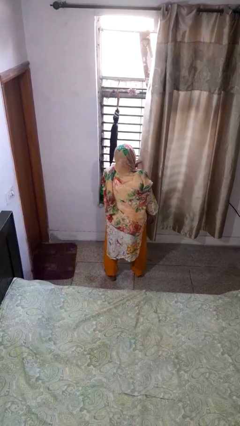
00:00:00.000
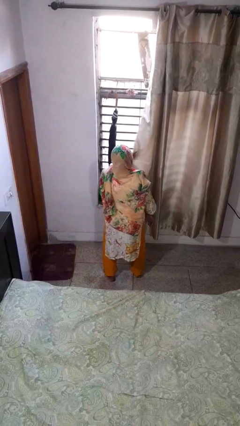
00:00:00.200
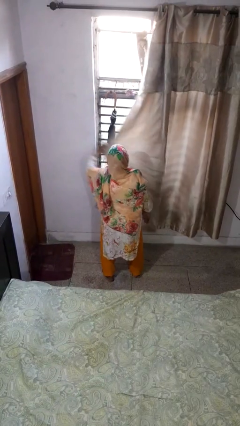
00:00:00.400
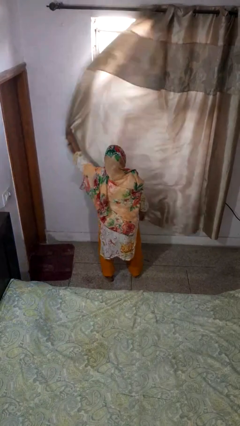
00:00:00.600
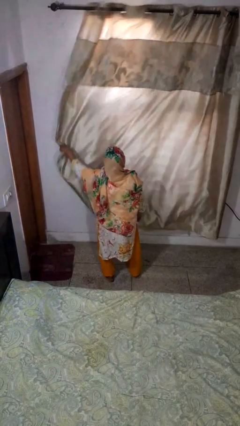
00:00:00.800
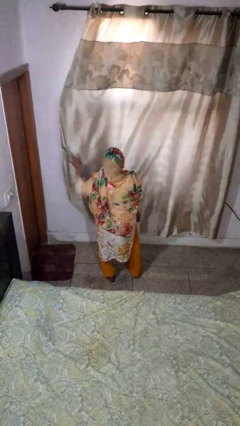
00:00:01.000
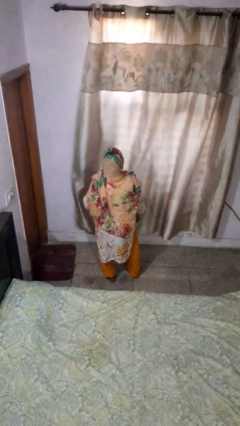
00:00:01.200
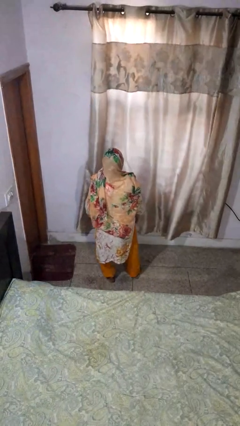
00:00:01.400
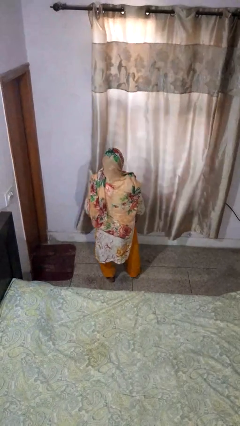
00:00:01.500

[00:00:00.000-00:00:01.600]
person closes curtains

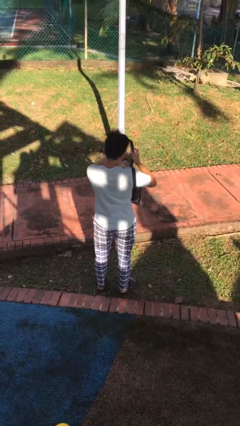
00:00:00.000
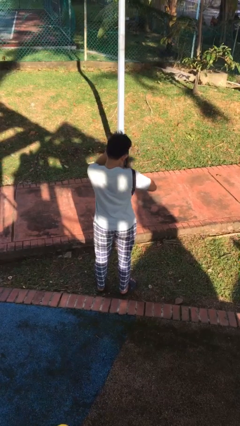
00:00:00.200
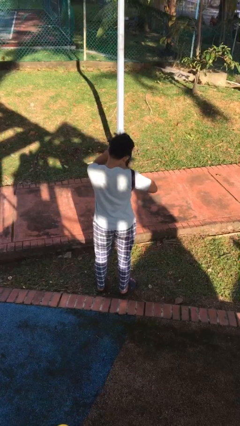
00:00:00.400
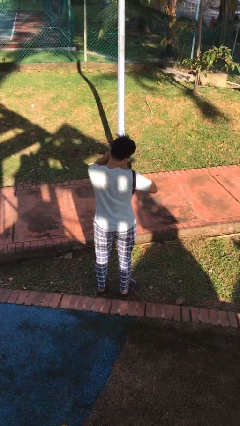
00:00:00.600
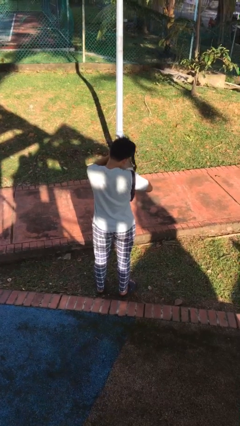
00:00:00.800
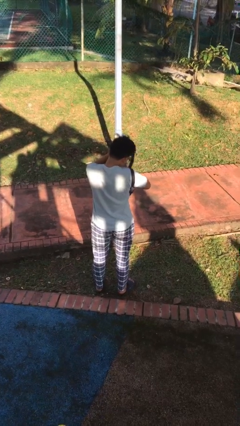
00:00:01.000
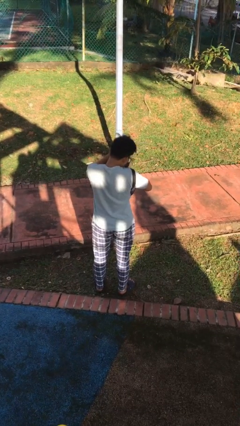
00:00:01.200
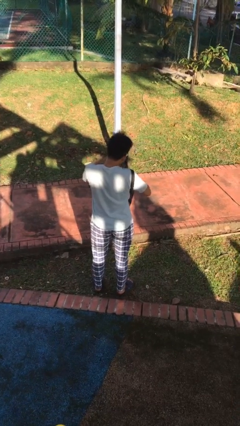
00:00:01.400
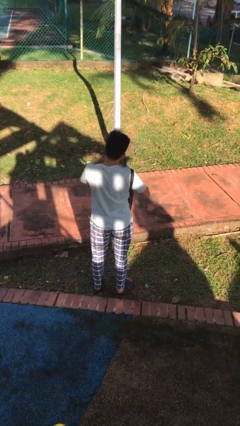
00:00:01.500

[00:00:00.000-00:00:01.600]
person searches in bag

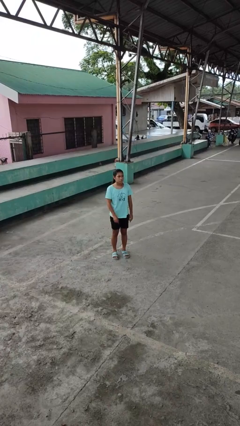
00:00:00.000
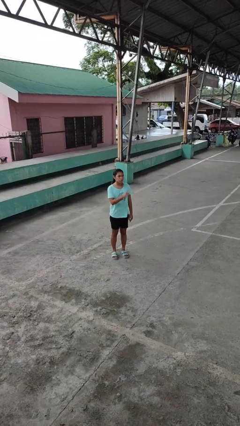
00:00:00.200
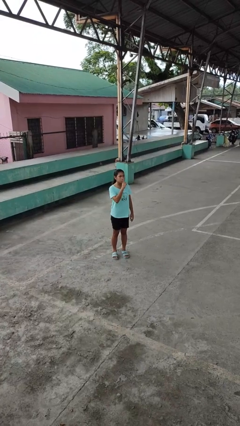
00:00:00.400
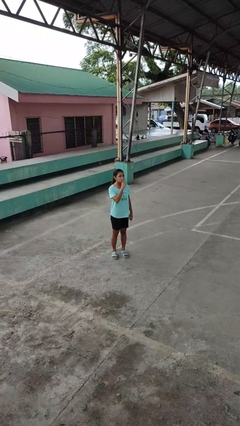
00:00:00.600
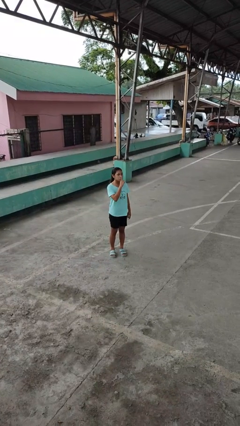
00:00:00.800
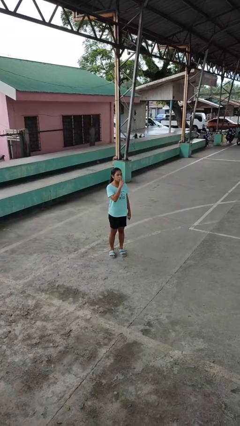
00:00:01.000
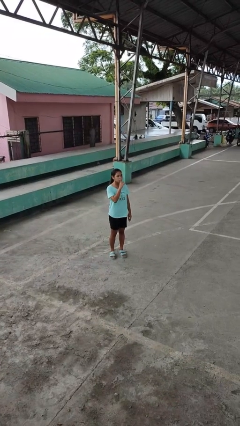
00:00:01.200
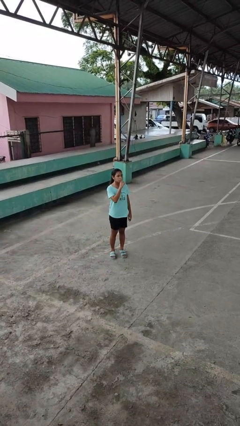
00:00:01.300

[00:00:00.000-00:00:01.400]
person gestures be quiet

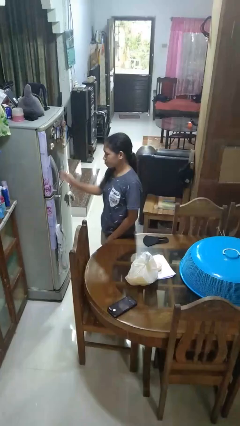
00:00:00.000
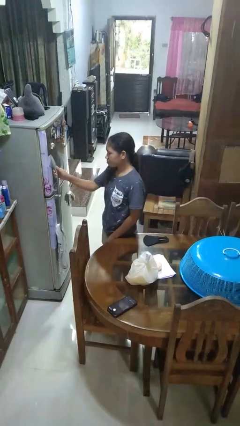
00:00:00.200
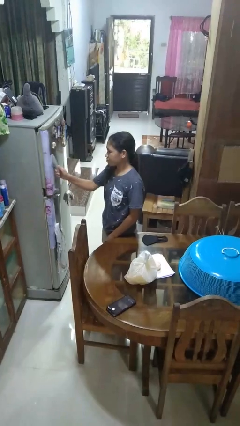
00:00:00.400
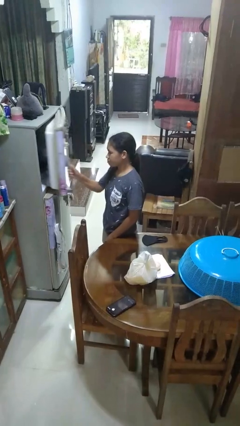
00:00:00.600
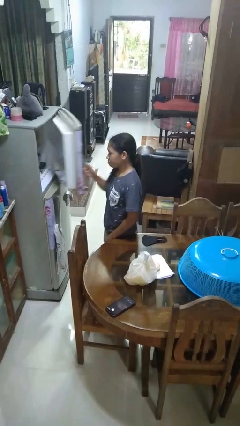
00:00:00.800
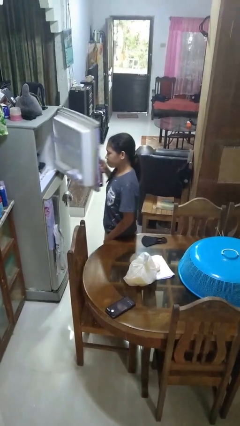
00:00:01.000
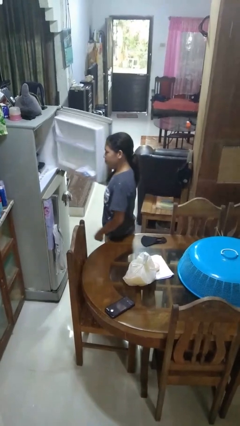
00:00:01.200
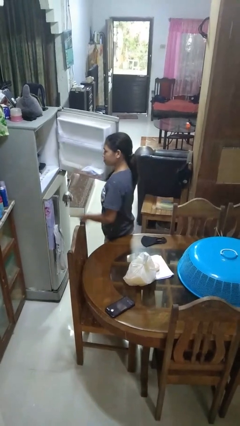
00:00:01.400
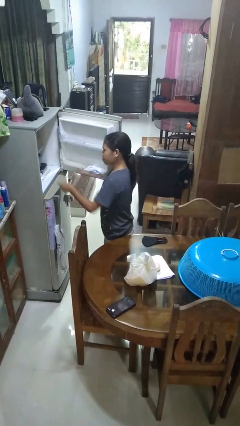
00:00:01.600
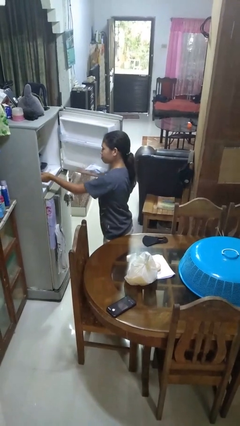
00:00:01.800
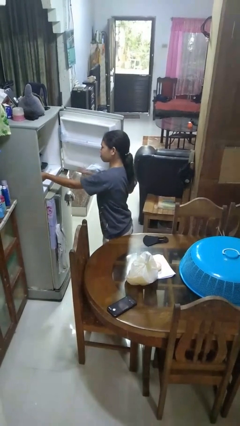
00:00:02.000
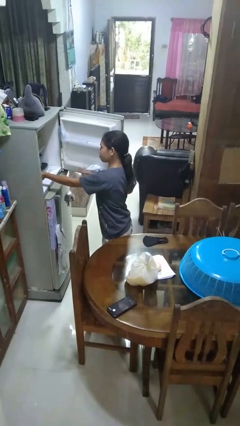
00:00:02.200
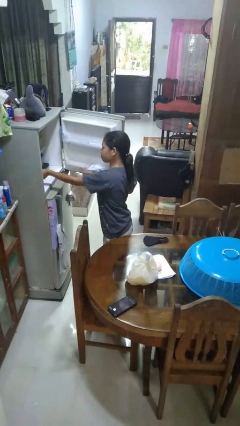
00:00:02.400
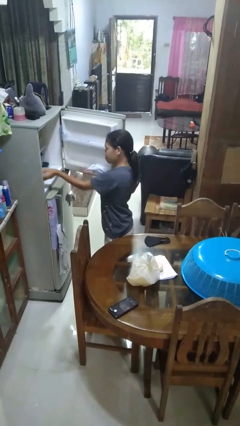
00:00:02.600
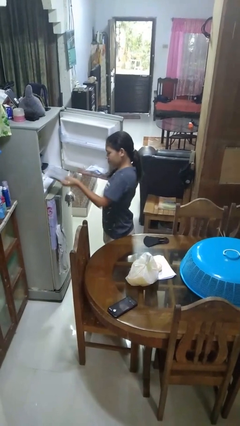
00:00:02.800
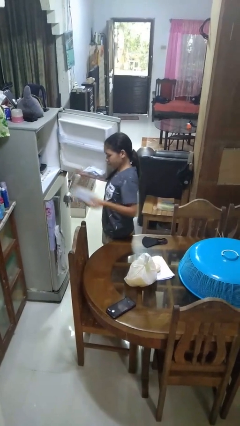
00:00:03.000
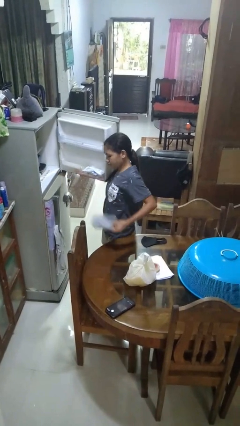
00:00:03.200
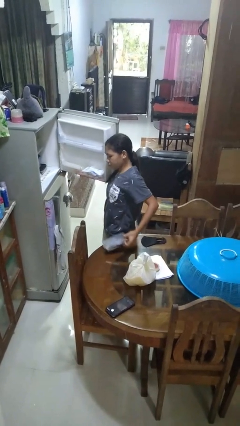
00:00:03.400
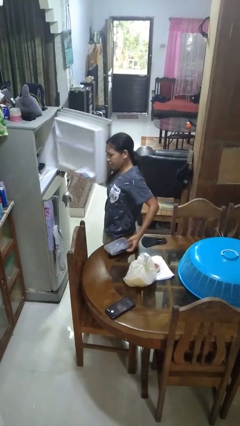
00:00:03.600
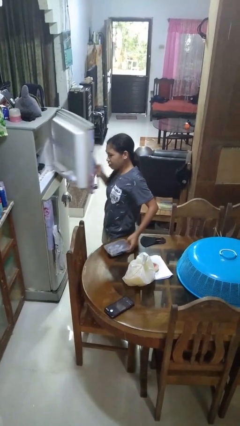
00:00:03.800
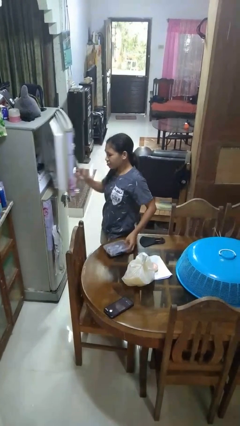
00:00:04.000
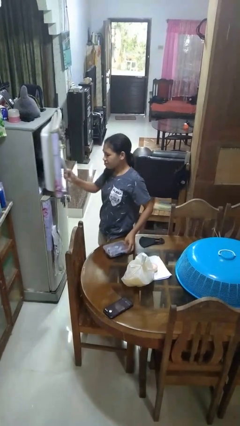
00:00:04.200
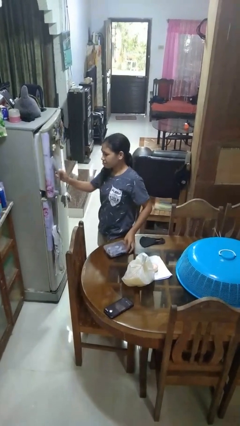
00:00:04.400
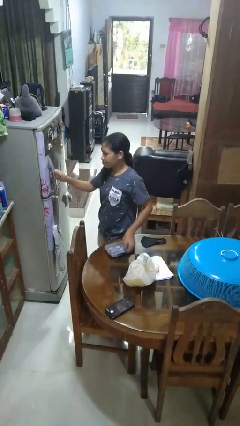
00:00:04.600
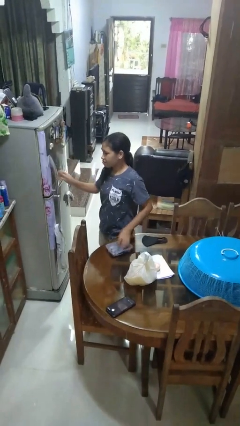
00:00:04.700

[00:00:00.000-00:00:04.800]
person takes object from refrigerator

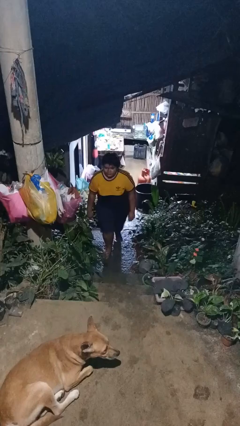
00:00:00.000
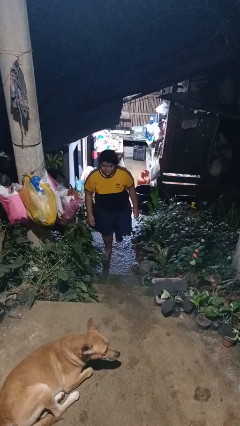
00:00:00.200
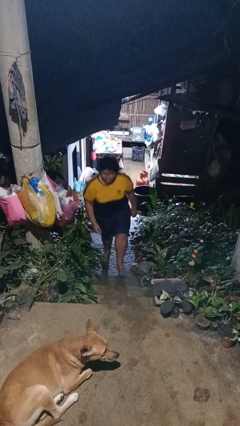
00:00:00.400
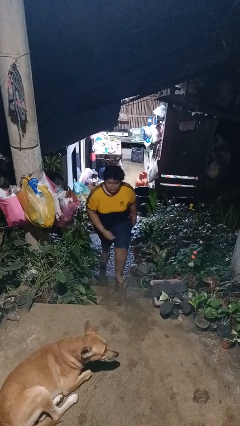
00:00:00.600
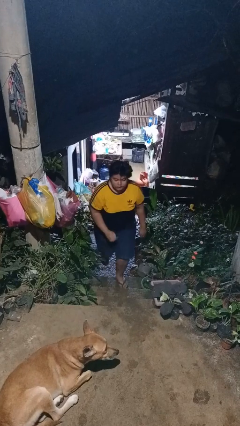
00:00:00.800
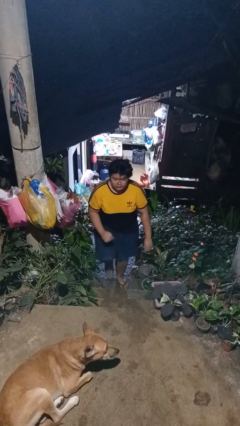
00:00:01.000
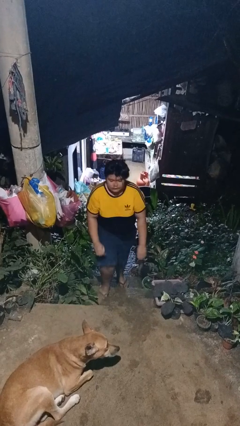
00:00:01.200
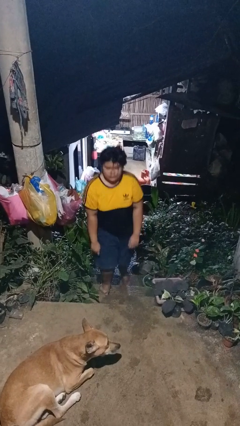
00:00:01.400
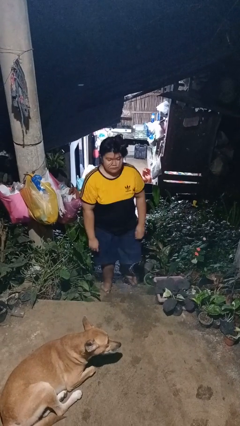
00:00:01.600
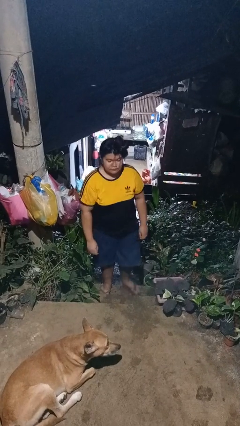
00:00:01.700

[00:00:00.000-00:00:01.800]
person climbs up stairs

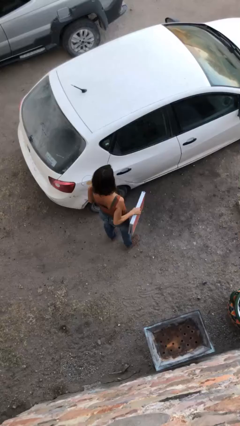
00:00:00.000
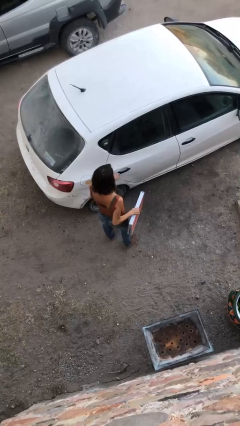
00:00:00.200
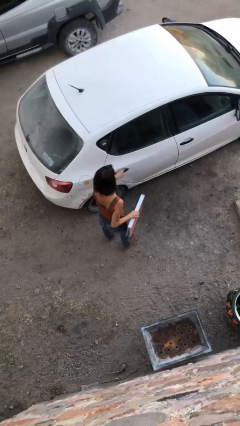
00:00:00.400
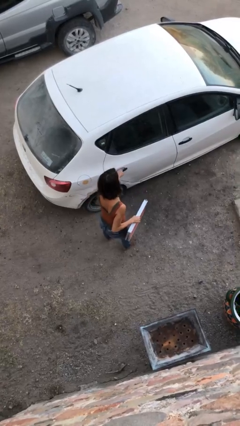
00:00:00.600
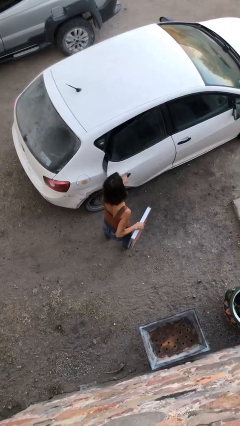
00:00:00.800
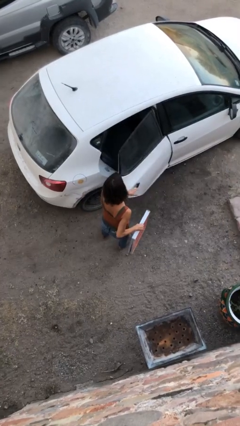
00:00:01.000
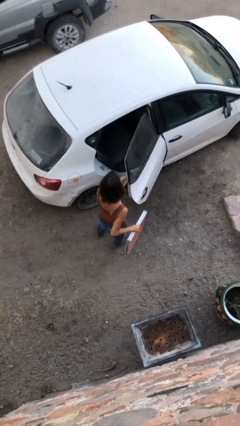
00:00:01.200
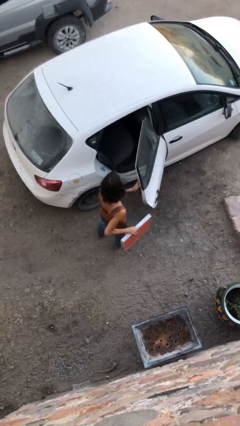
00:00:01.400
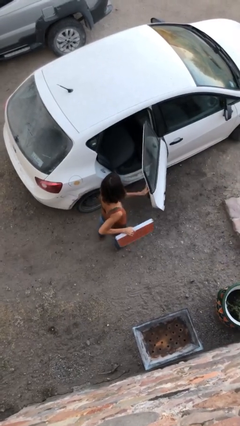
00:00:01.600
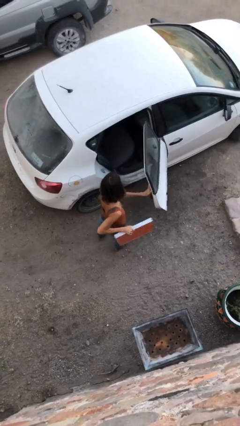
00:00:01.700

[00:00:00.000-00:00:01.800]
person opens car door

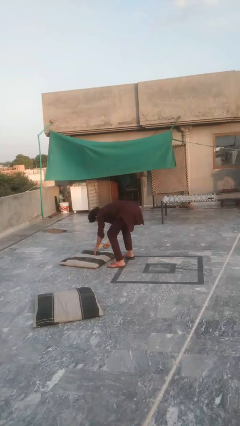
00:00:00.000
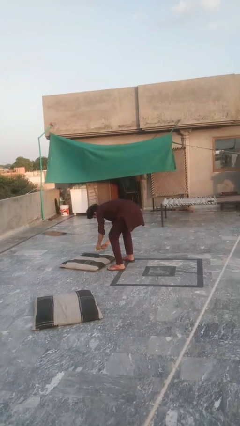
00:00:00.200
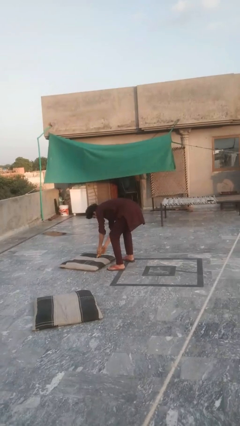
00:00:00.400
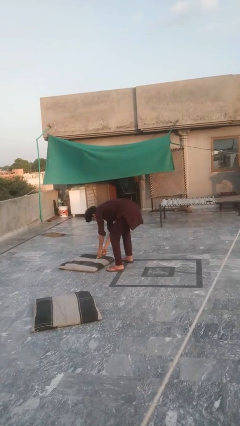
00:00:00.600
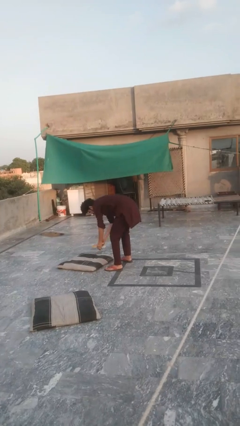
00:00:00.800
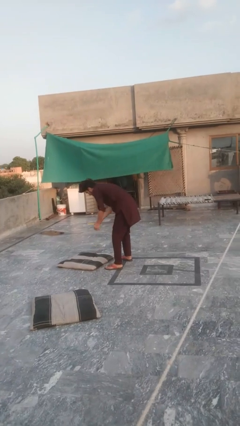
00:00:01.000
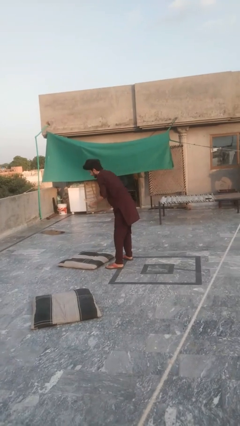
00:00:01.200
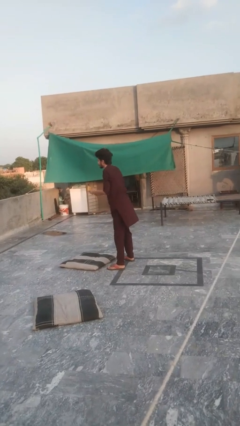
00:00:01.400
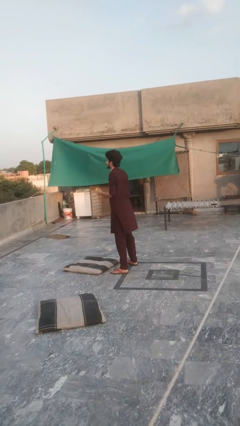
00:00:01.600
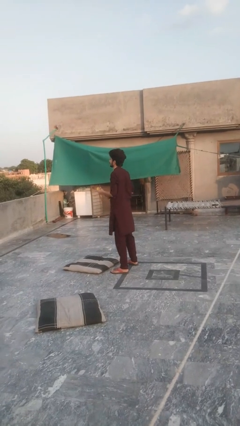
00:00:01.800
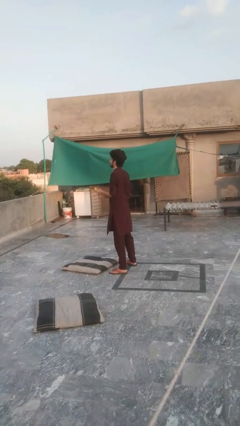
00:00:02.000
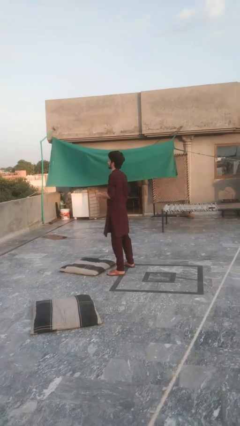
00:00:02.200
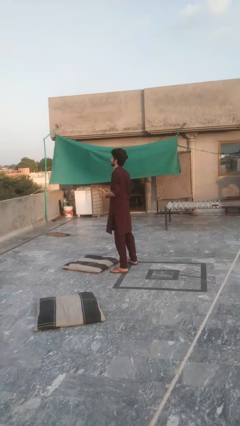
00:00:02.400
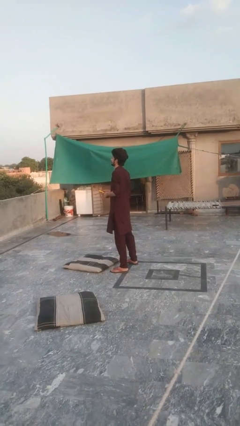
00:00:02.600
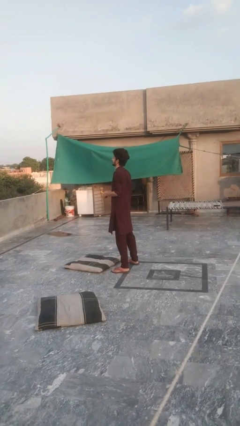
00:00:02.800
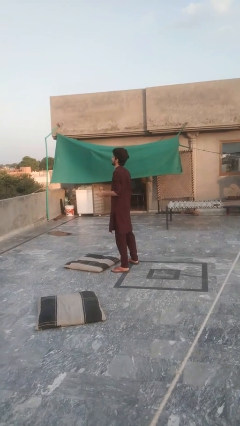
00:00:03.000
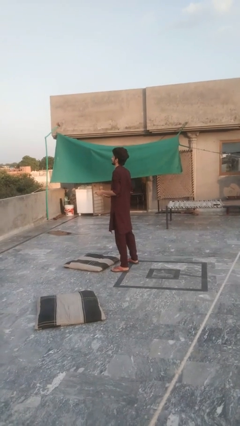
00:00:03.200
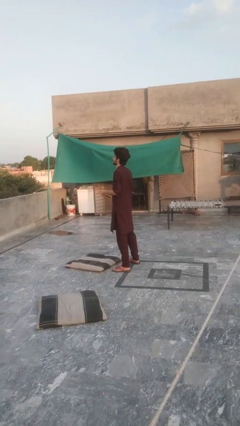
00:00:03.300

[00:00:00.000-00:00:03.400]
person picks up object from floor

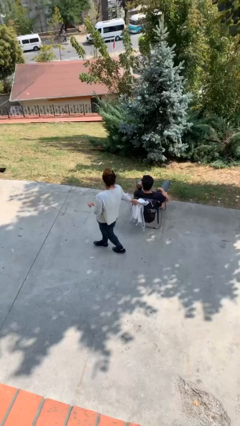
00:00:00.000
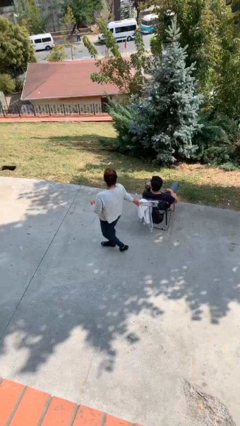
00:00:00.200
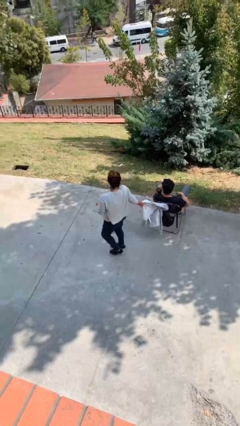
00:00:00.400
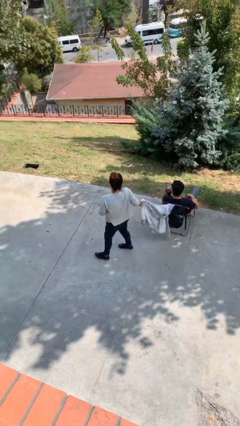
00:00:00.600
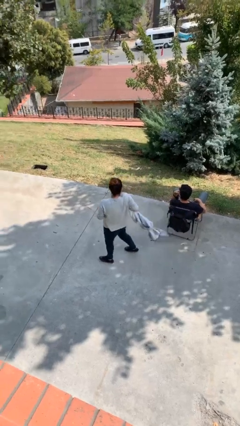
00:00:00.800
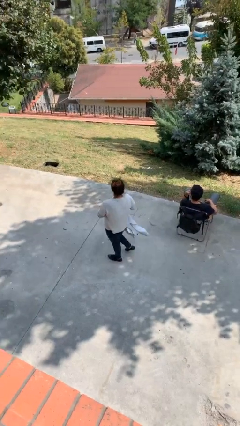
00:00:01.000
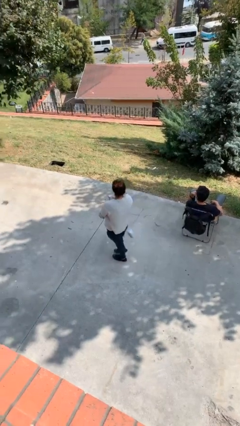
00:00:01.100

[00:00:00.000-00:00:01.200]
person steals object from person
